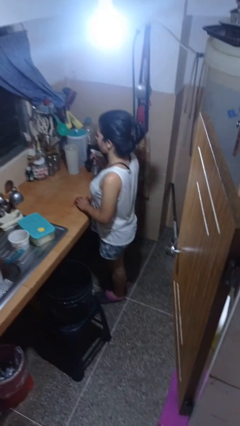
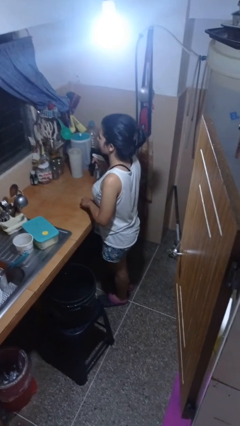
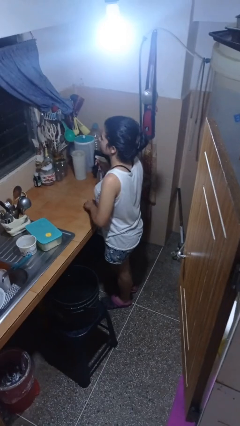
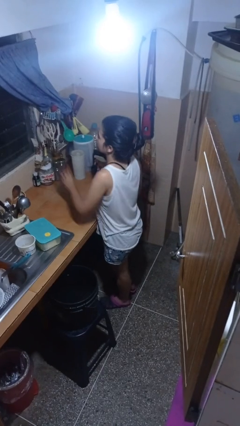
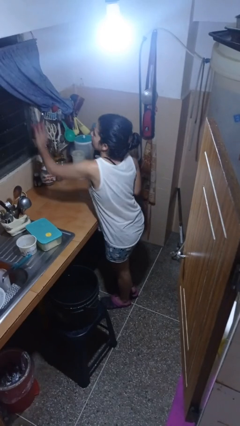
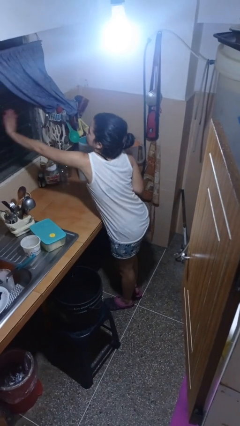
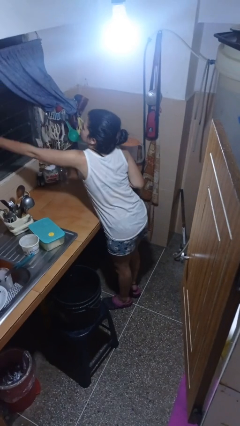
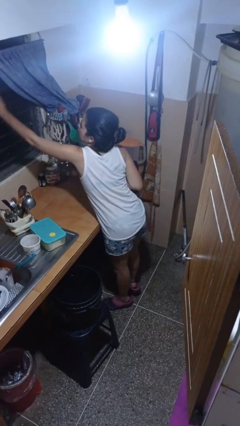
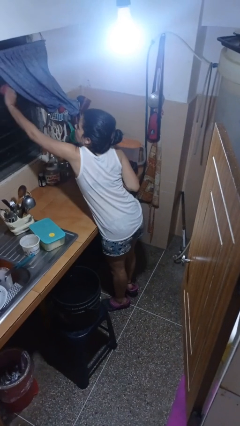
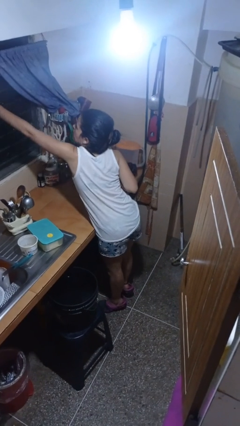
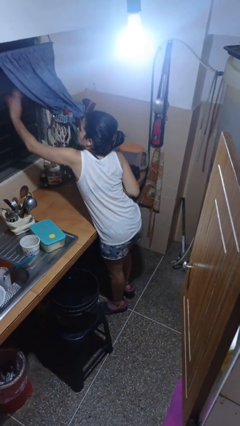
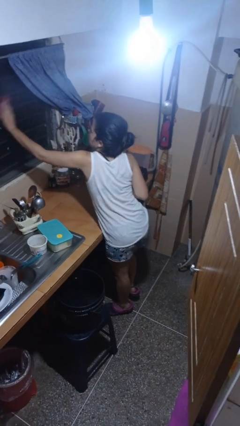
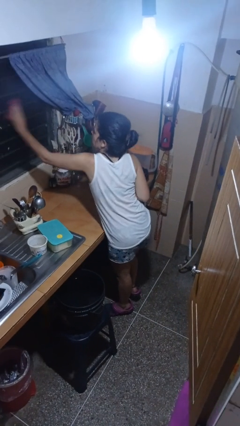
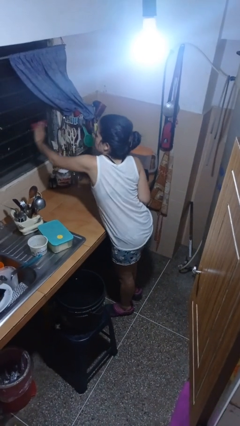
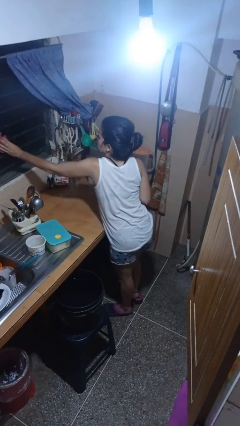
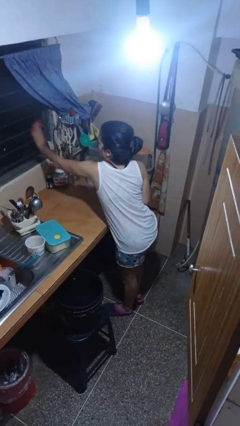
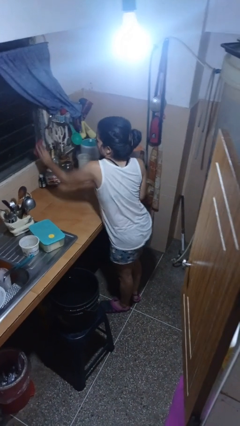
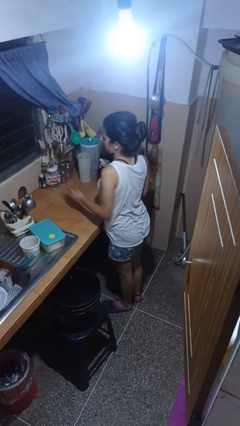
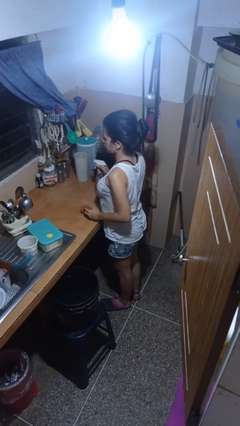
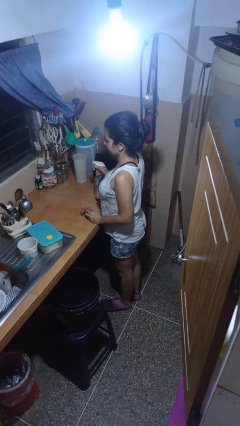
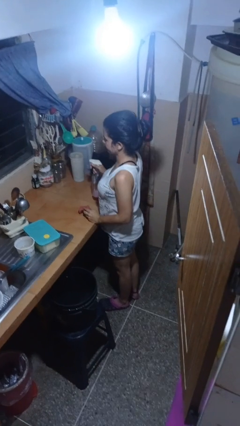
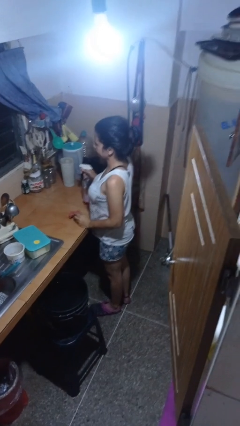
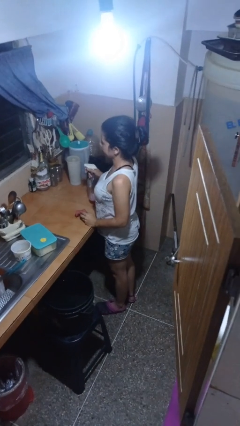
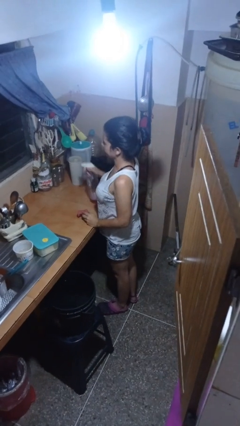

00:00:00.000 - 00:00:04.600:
person washes window

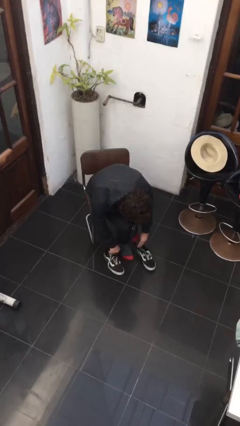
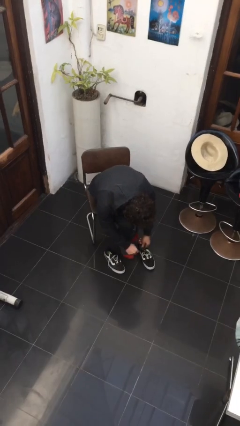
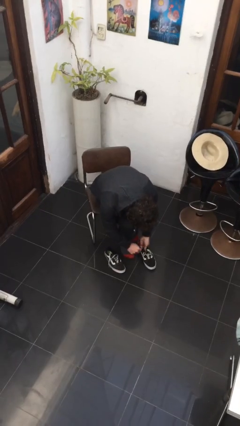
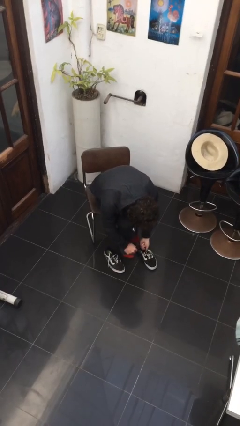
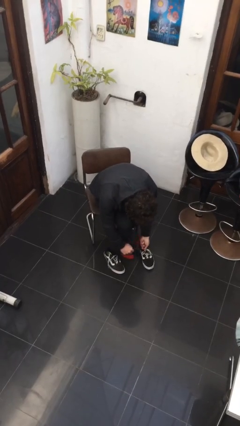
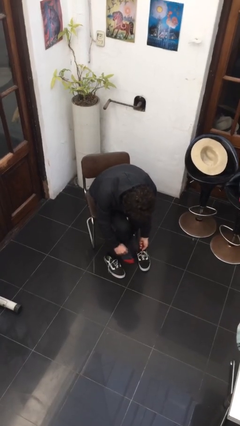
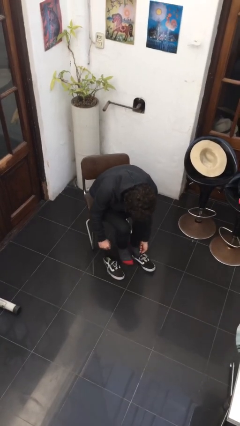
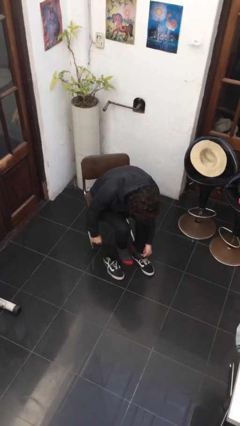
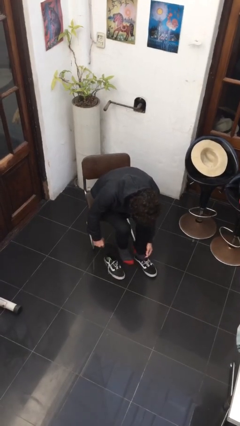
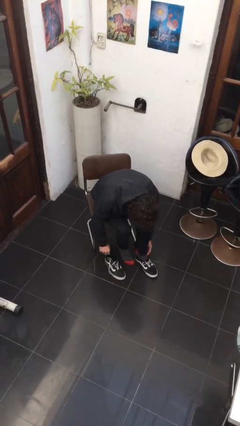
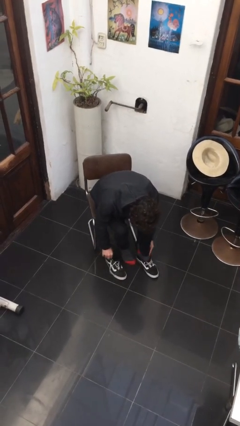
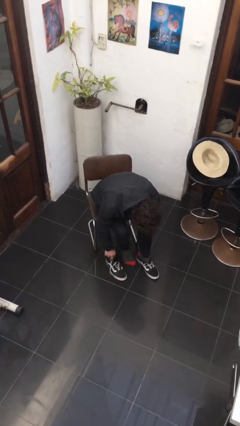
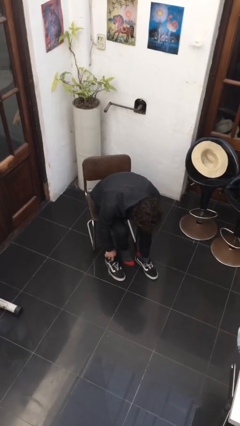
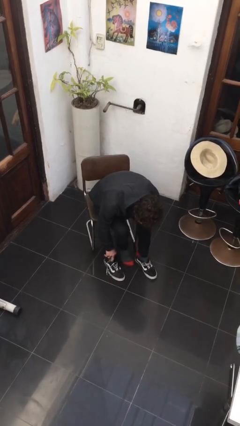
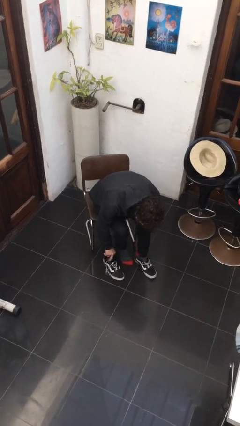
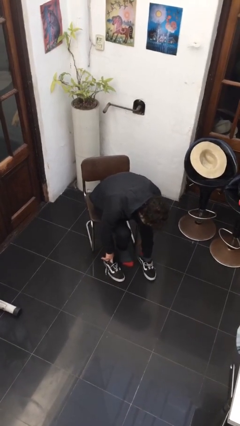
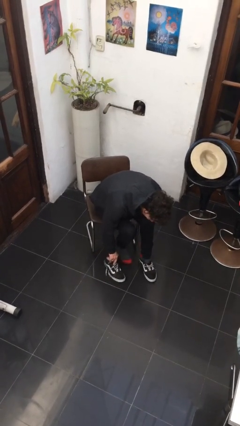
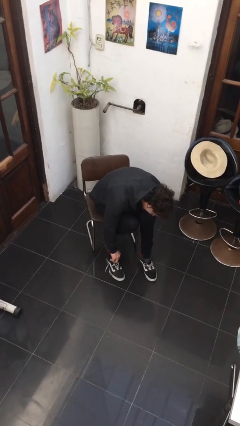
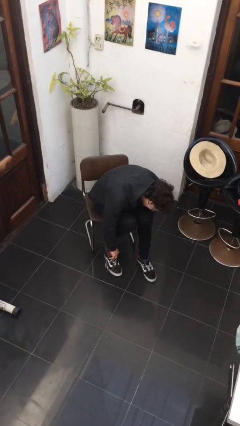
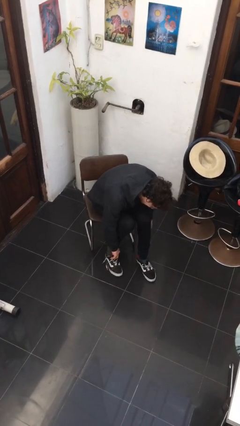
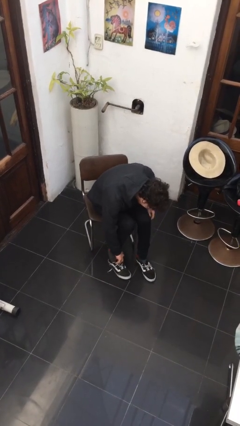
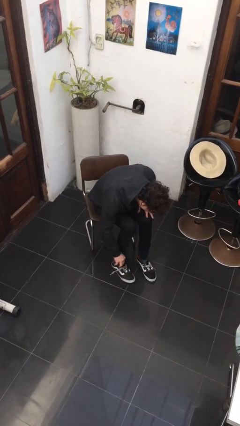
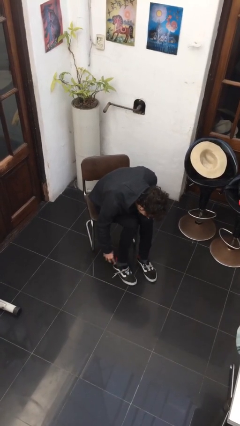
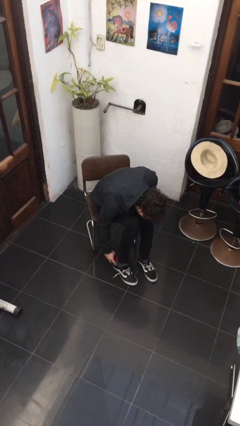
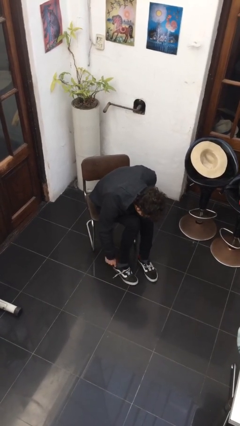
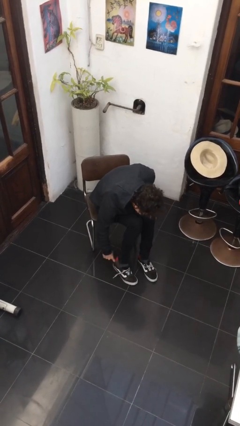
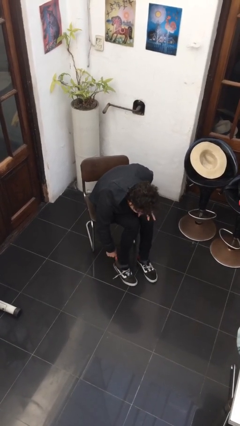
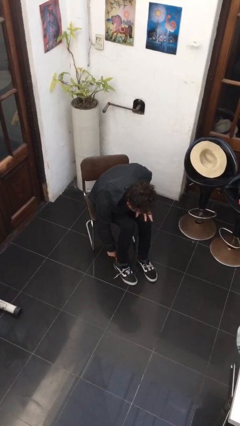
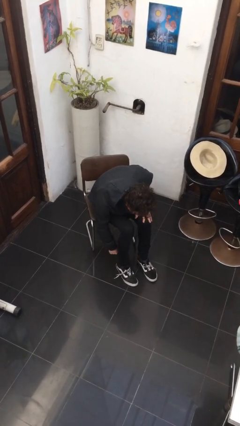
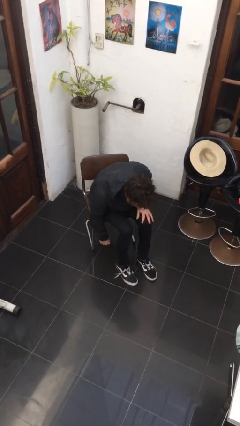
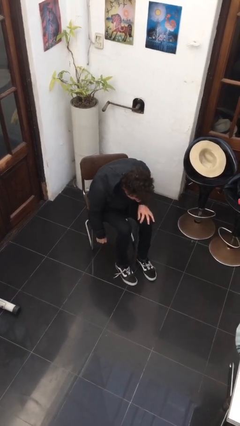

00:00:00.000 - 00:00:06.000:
person puts on shoes

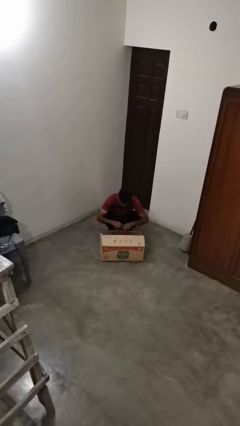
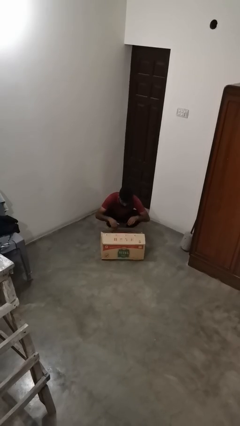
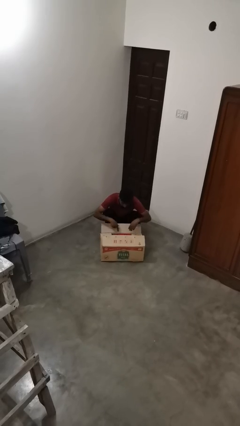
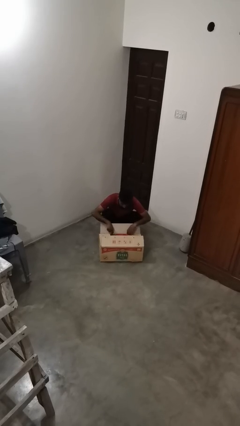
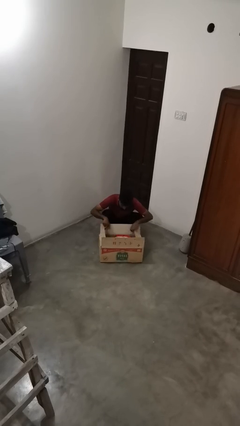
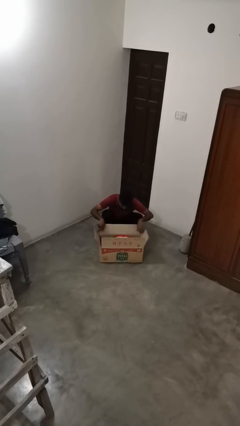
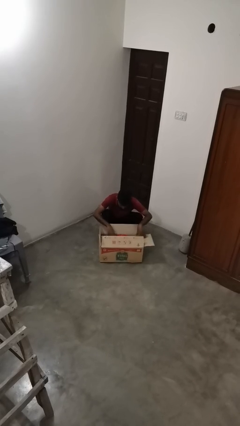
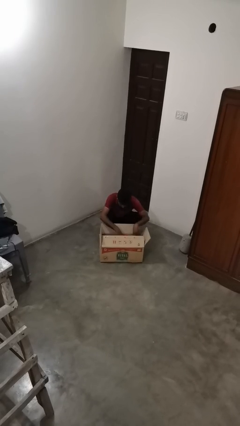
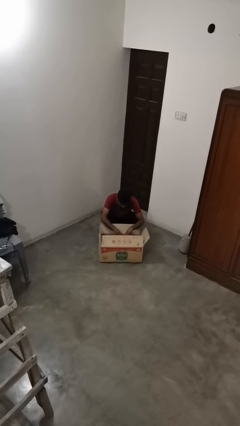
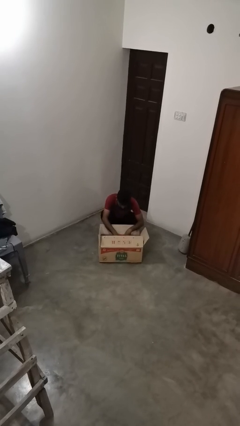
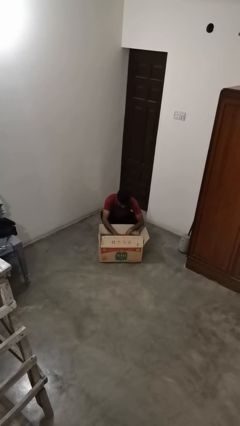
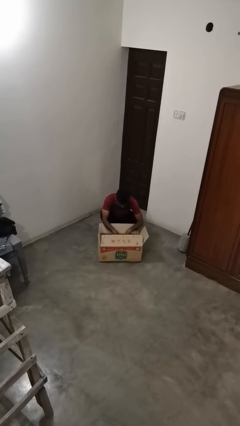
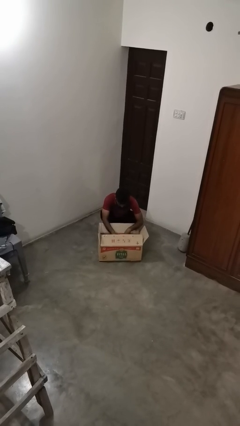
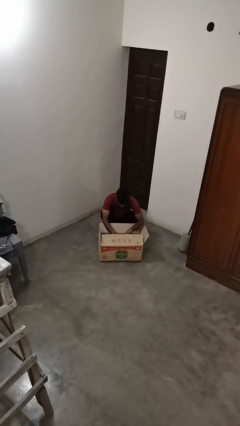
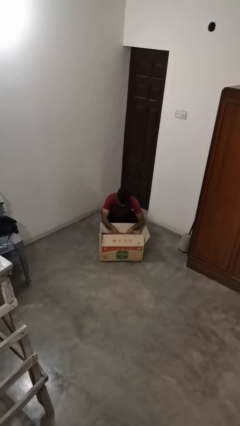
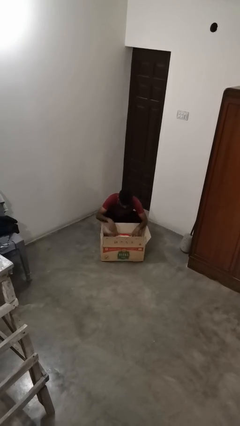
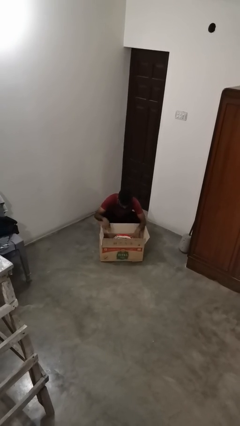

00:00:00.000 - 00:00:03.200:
person searches in box

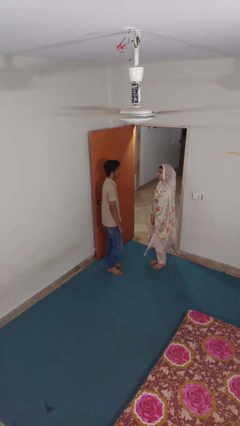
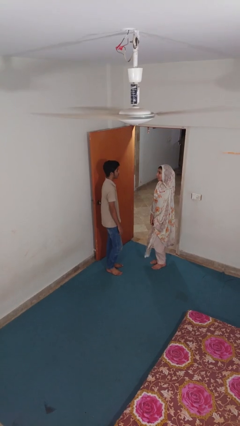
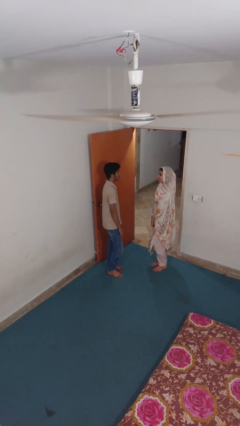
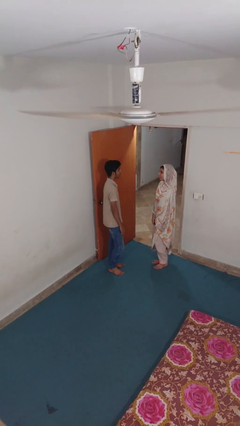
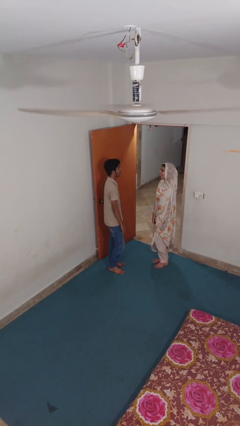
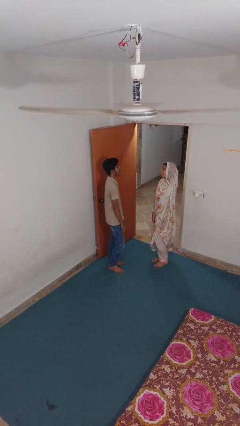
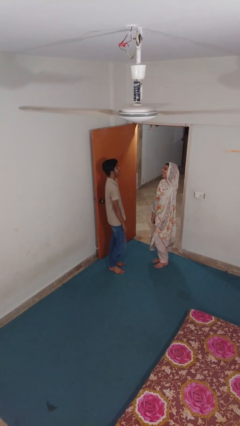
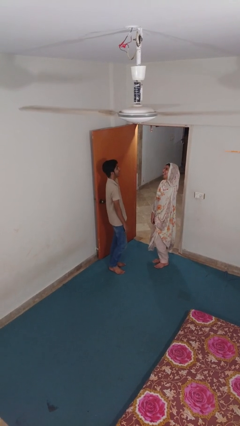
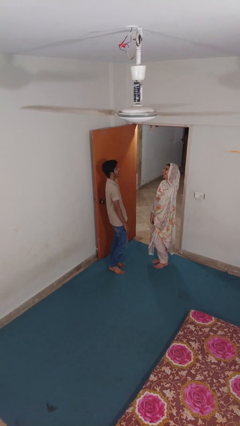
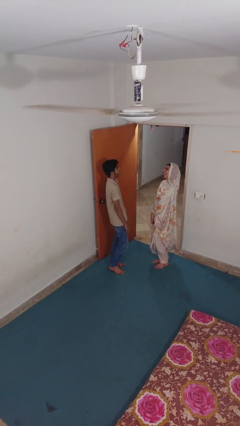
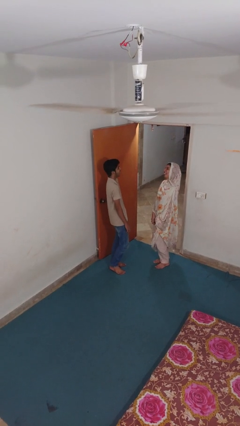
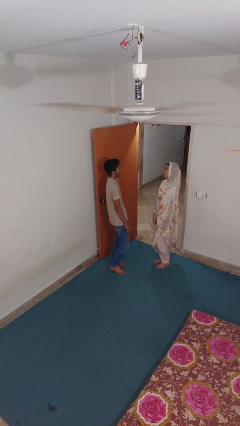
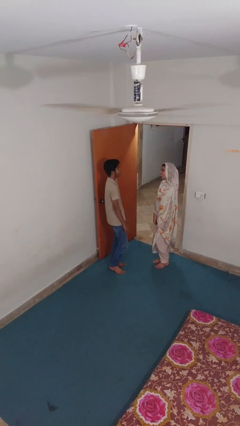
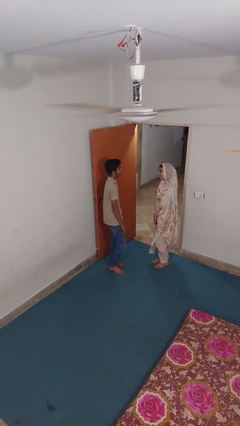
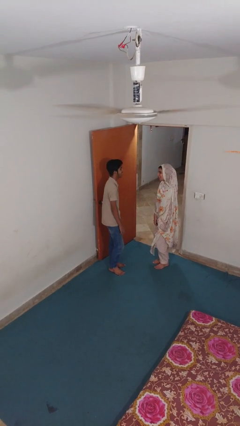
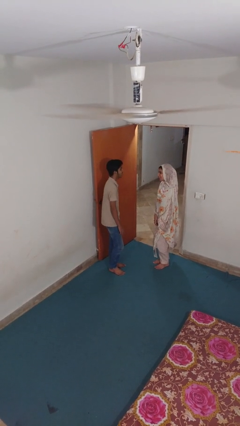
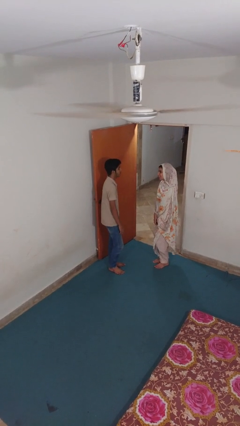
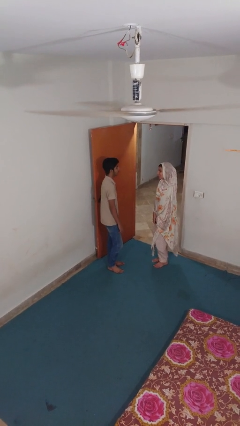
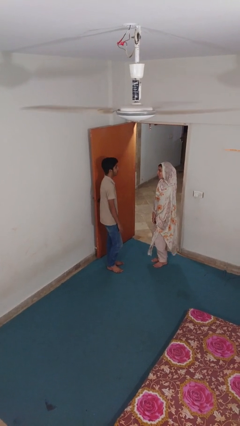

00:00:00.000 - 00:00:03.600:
person laughs with person

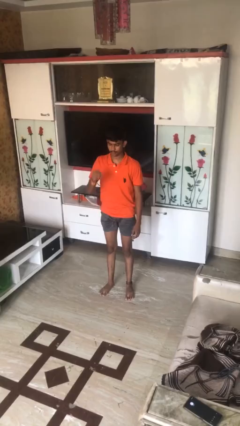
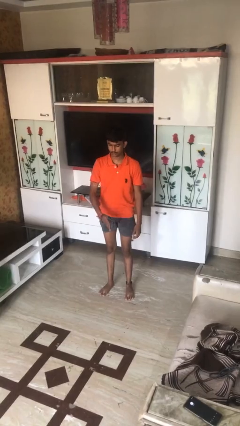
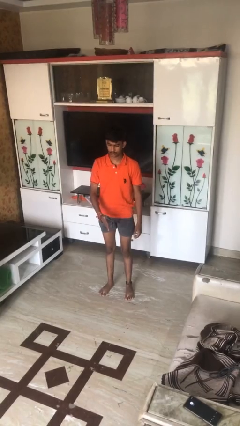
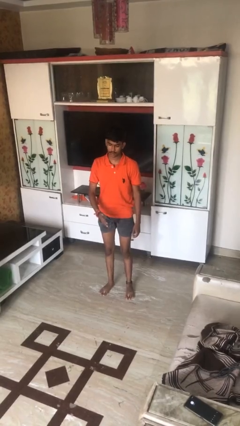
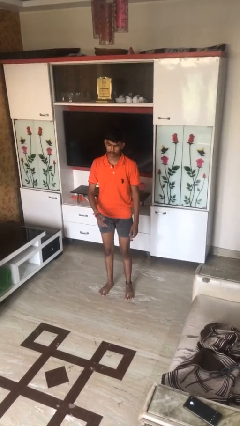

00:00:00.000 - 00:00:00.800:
person karate chop
